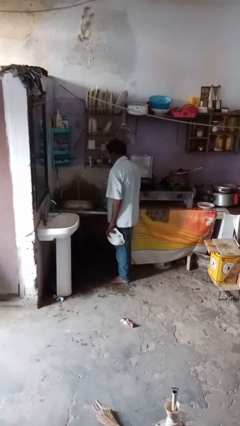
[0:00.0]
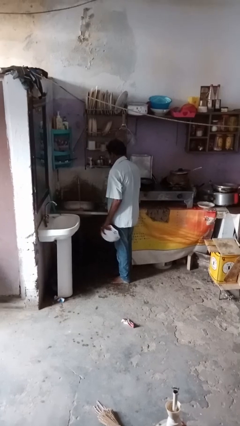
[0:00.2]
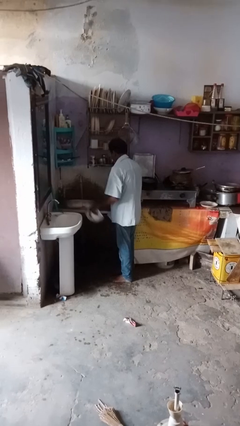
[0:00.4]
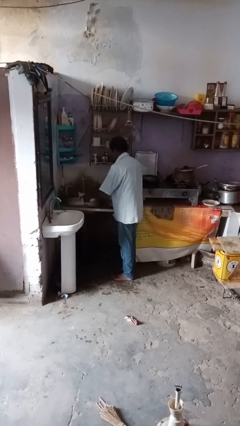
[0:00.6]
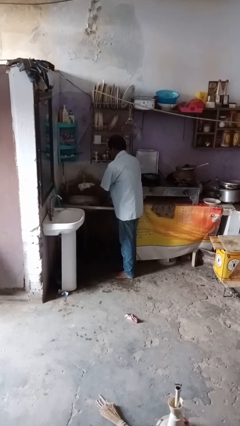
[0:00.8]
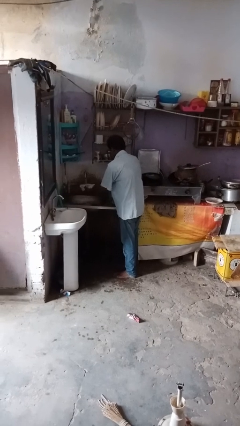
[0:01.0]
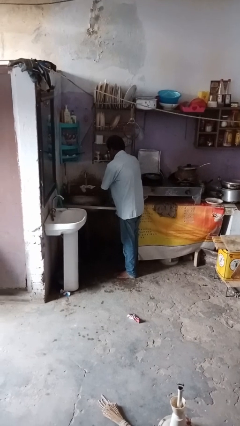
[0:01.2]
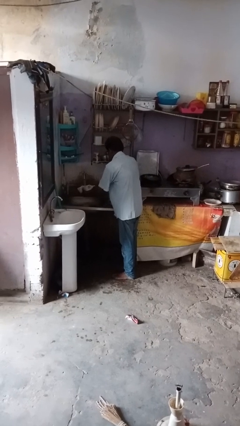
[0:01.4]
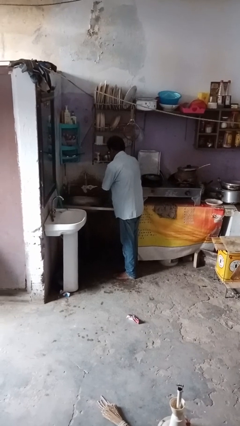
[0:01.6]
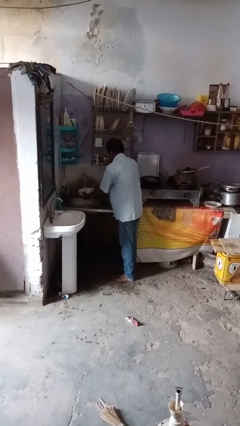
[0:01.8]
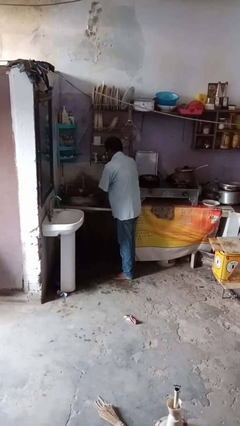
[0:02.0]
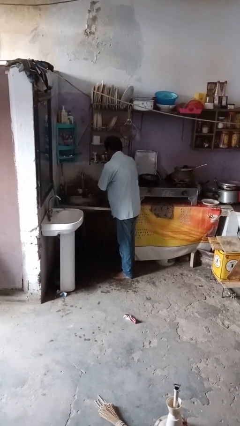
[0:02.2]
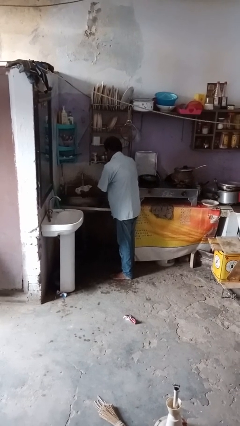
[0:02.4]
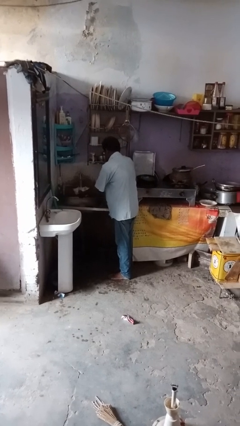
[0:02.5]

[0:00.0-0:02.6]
person washes dish

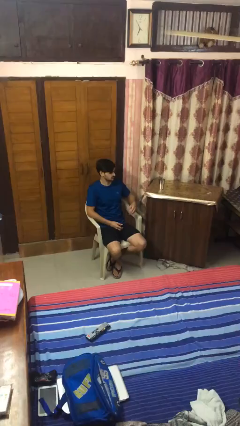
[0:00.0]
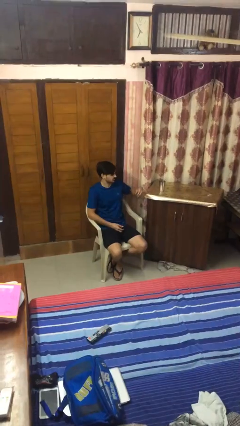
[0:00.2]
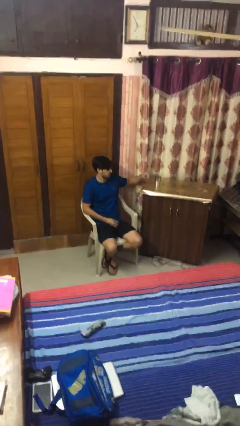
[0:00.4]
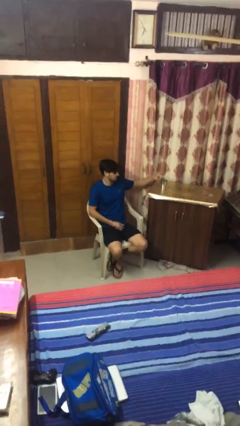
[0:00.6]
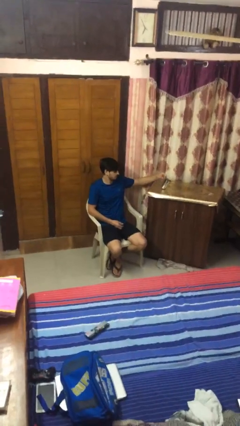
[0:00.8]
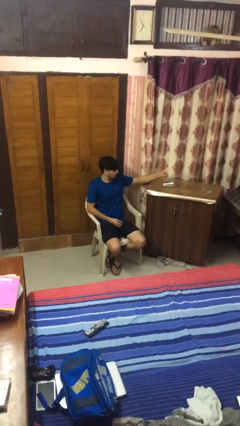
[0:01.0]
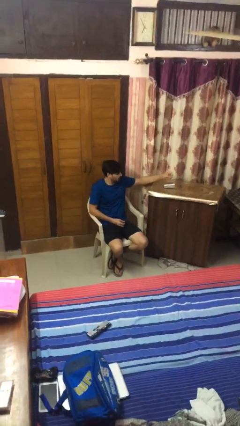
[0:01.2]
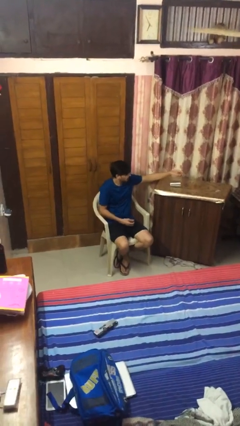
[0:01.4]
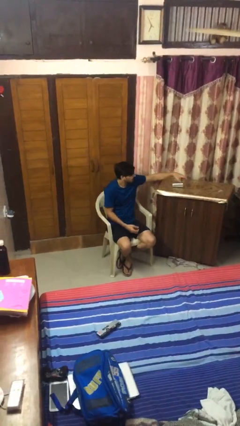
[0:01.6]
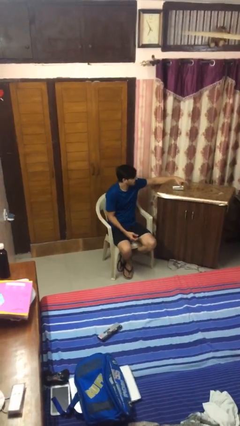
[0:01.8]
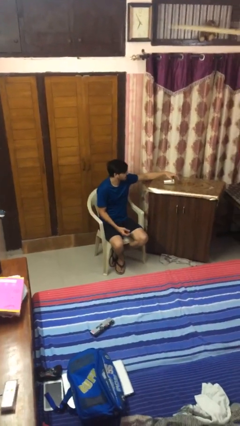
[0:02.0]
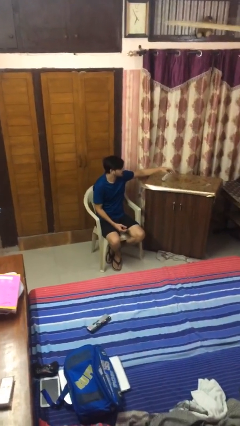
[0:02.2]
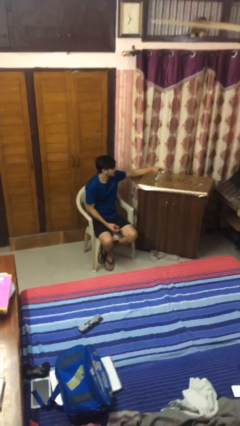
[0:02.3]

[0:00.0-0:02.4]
person spills on table

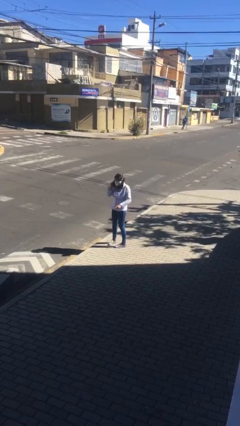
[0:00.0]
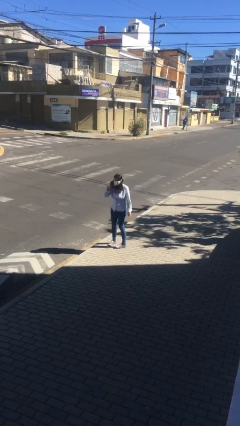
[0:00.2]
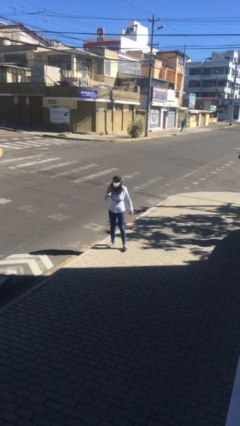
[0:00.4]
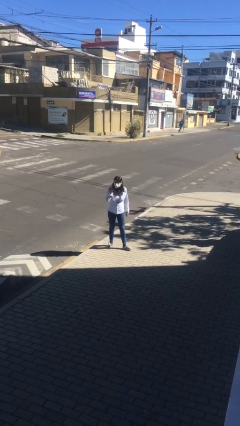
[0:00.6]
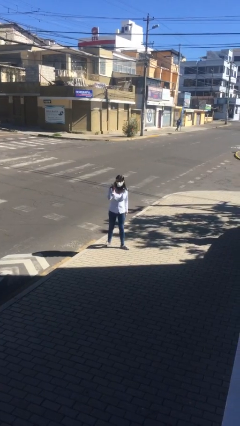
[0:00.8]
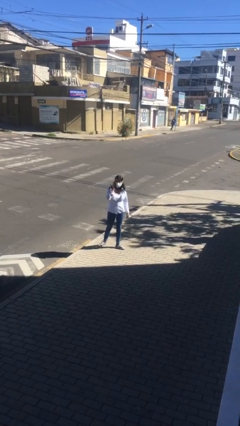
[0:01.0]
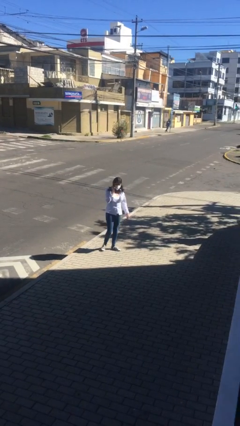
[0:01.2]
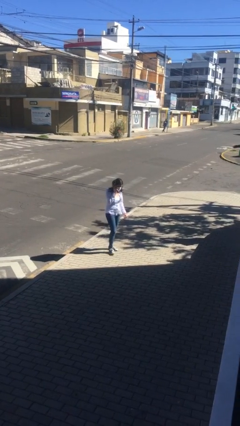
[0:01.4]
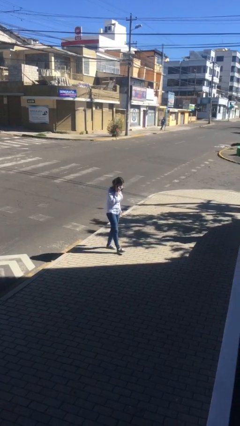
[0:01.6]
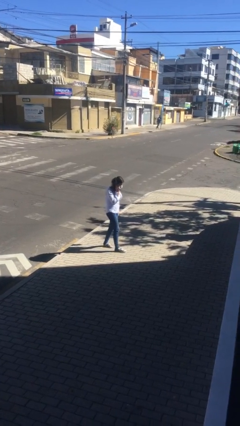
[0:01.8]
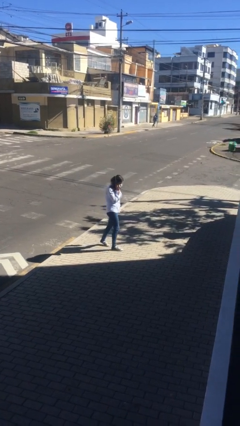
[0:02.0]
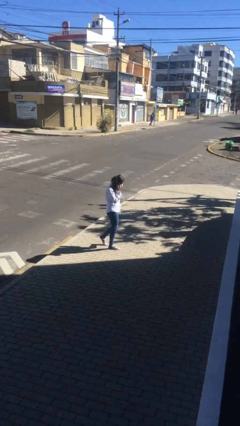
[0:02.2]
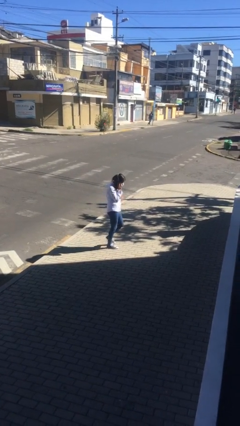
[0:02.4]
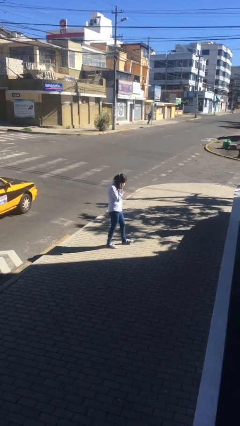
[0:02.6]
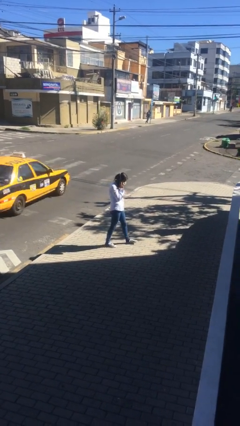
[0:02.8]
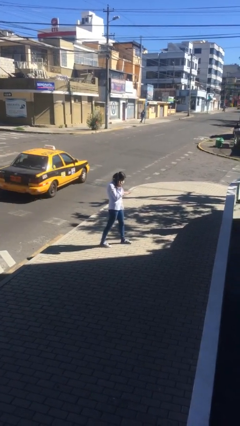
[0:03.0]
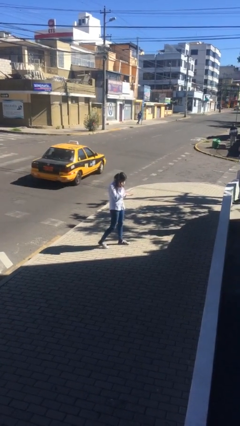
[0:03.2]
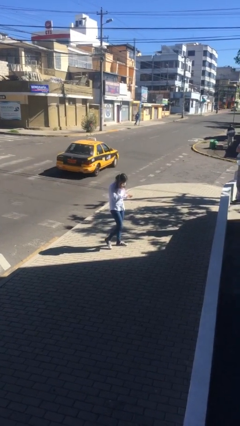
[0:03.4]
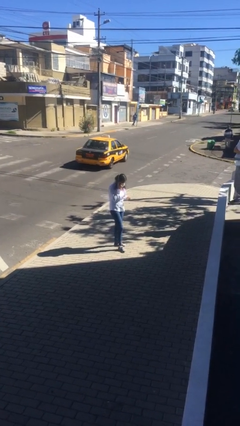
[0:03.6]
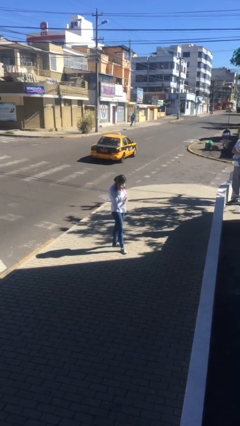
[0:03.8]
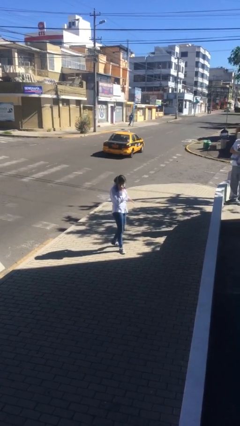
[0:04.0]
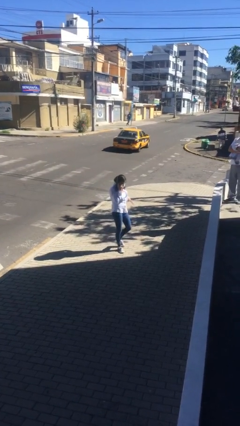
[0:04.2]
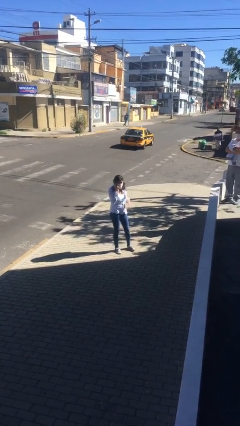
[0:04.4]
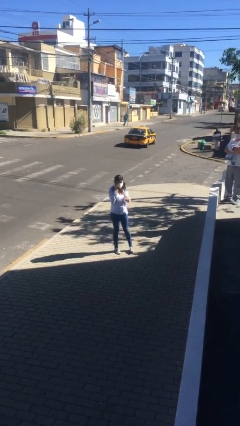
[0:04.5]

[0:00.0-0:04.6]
person talks on phone

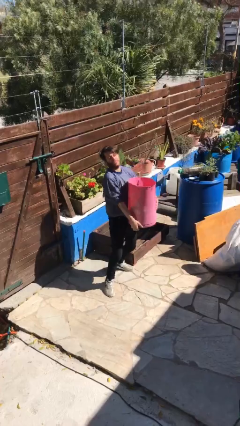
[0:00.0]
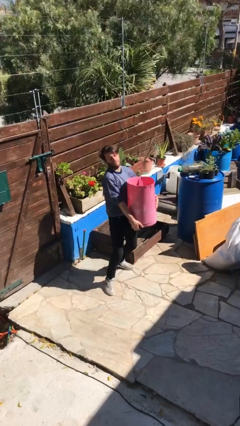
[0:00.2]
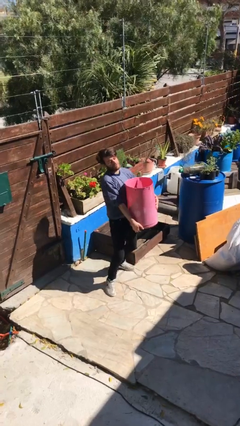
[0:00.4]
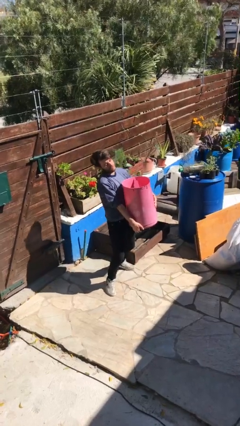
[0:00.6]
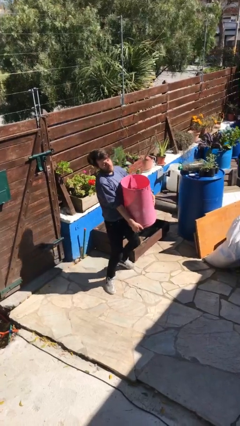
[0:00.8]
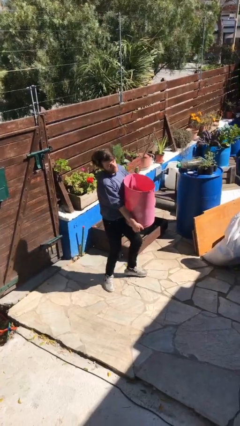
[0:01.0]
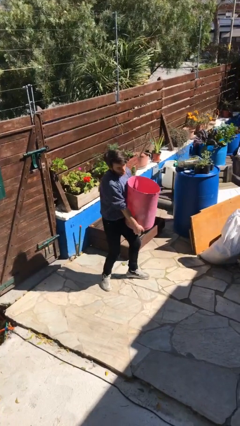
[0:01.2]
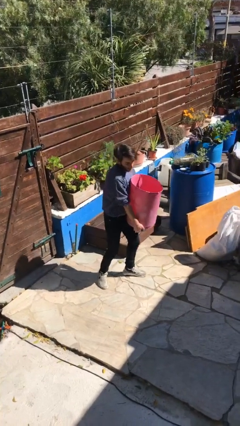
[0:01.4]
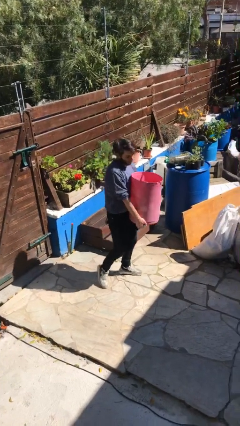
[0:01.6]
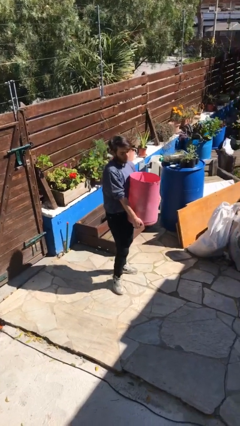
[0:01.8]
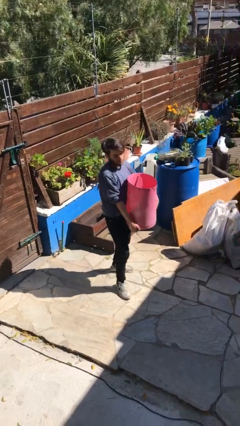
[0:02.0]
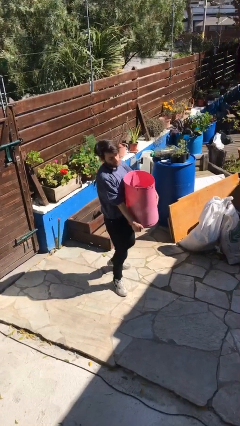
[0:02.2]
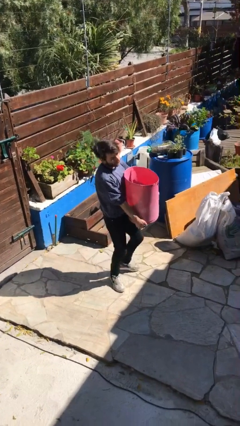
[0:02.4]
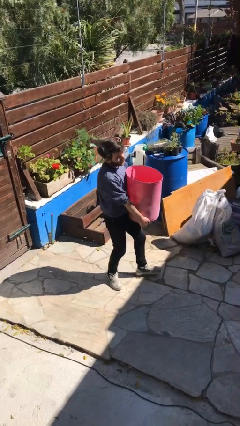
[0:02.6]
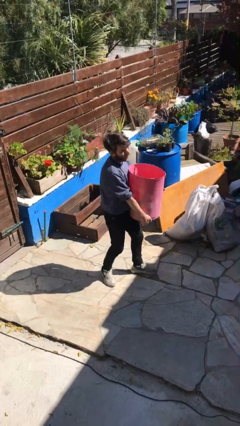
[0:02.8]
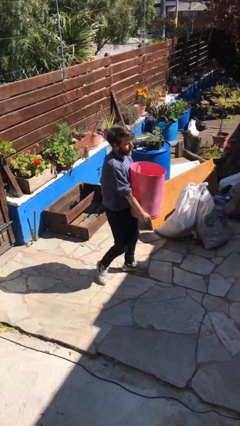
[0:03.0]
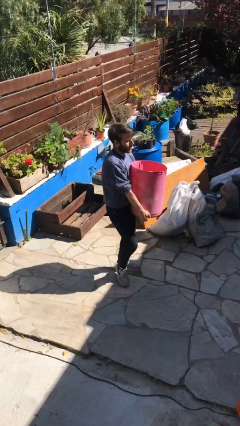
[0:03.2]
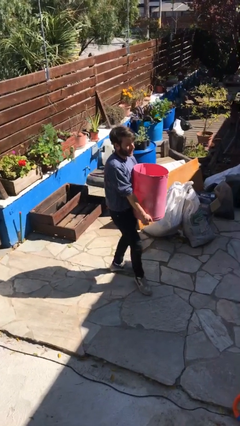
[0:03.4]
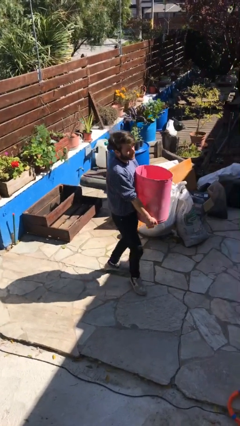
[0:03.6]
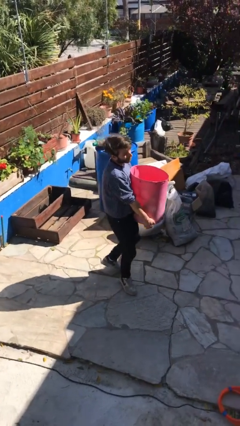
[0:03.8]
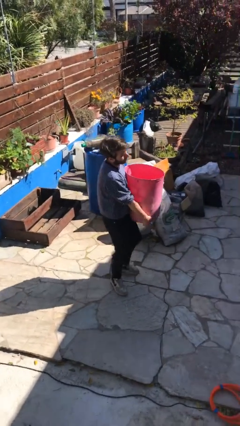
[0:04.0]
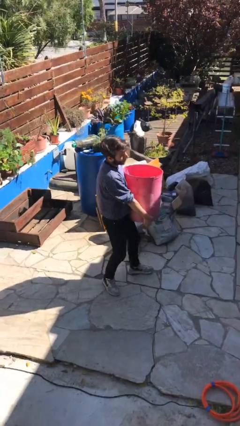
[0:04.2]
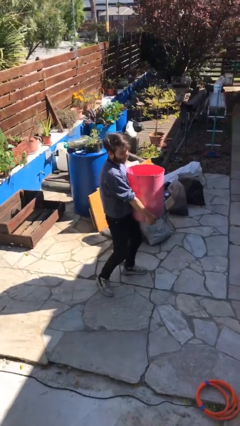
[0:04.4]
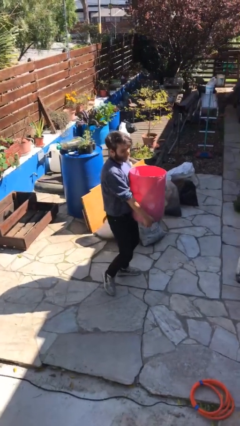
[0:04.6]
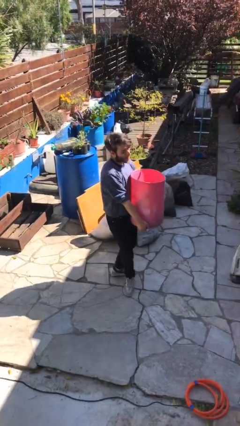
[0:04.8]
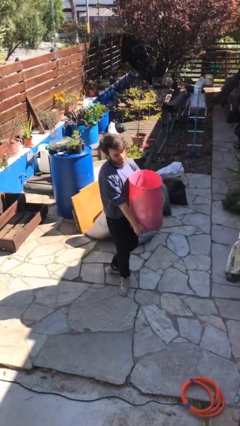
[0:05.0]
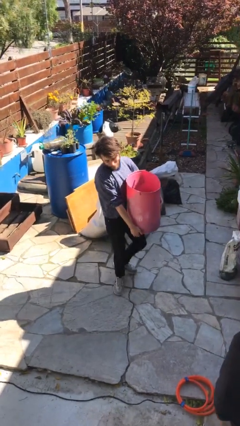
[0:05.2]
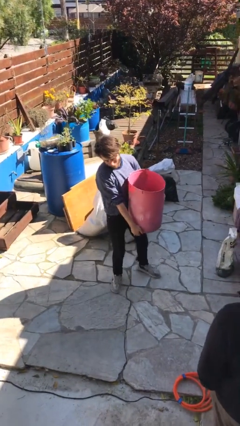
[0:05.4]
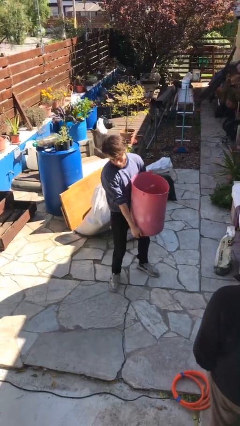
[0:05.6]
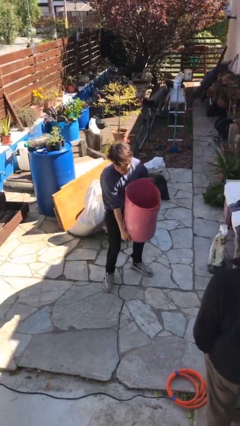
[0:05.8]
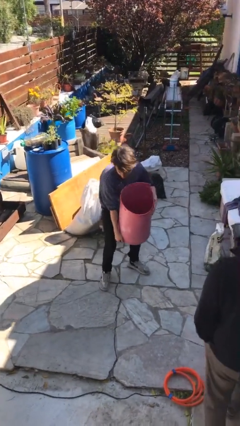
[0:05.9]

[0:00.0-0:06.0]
person carries heavy object

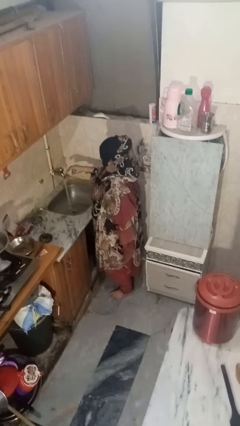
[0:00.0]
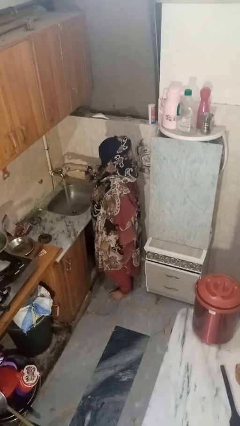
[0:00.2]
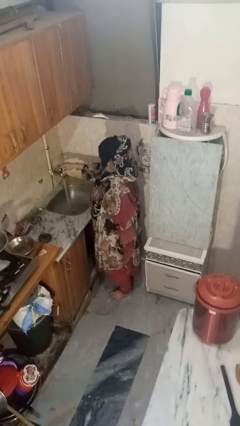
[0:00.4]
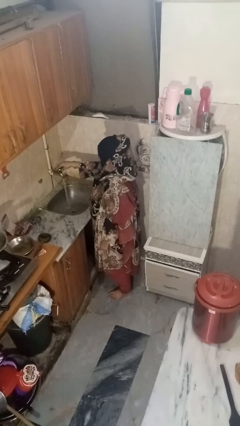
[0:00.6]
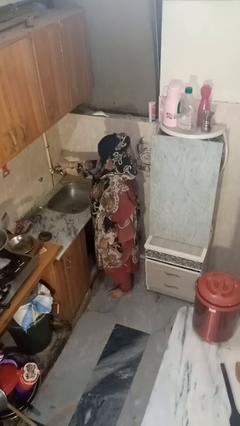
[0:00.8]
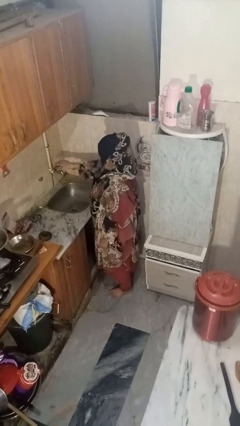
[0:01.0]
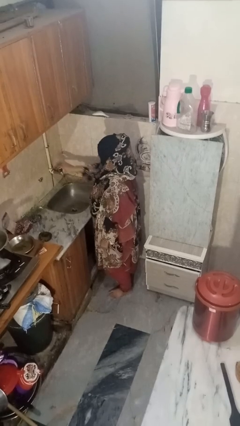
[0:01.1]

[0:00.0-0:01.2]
person turns off faucet

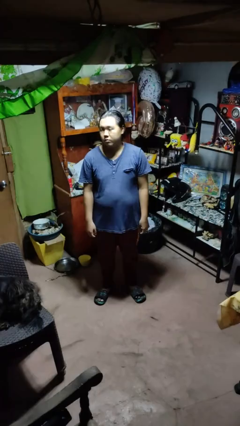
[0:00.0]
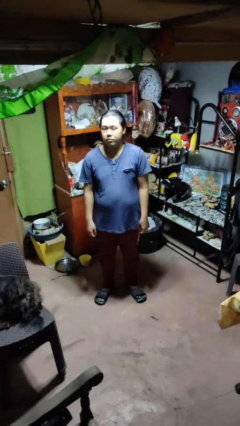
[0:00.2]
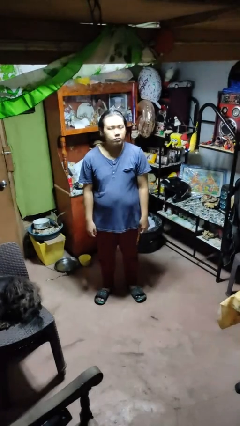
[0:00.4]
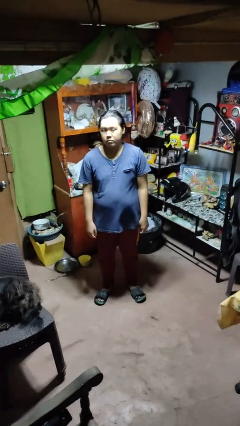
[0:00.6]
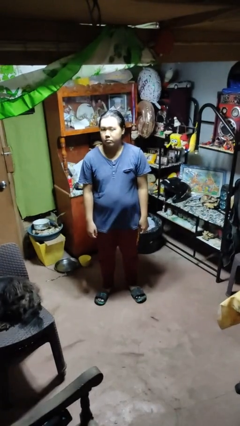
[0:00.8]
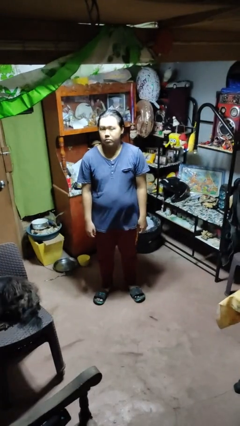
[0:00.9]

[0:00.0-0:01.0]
person shakes head
